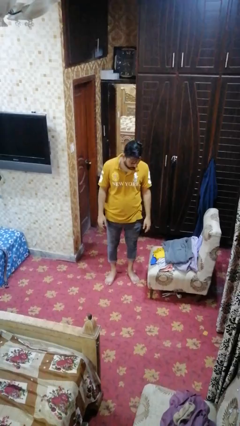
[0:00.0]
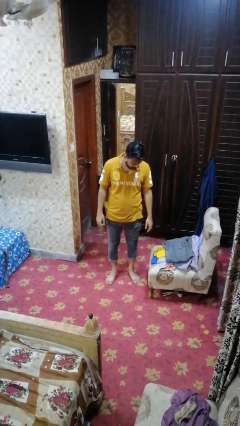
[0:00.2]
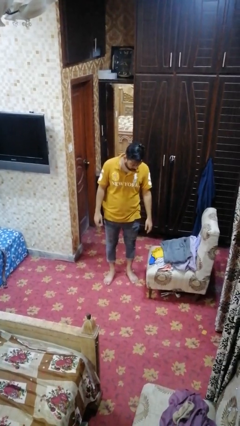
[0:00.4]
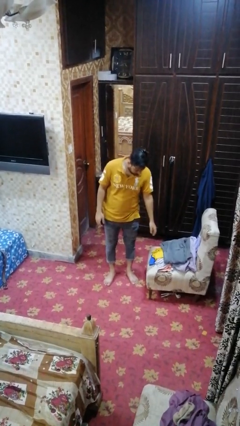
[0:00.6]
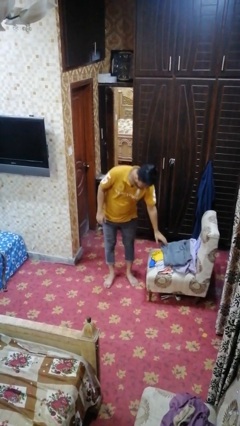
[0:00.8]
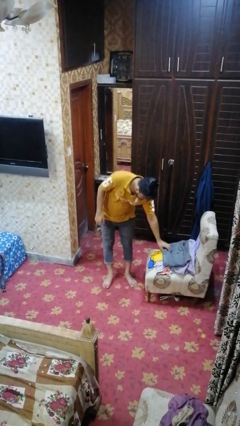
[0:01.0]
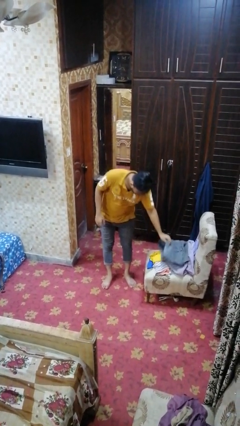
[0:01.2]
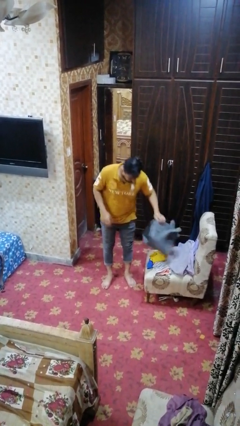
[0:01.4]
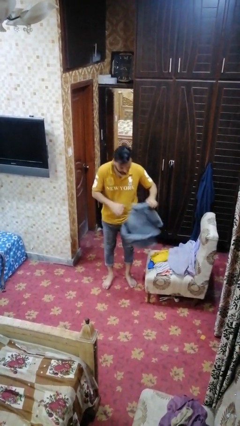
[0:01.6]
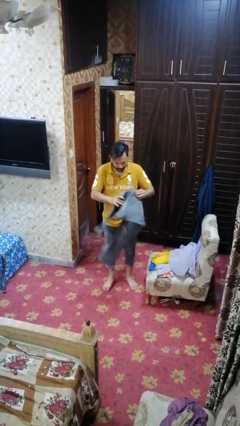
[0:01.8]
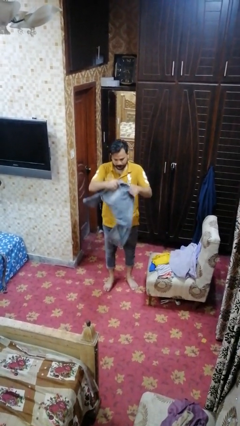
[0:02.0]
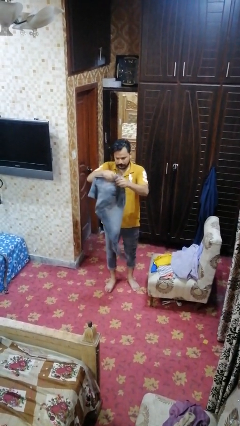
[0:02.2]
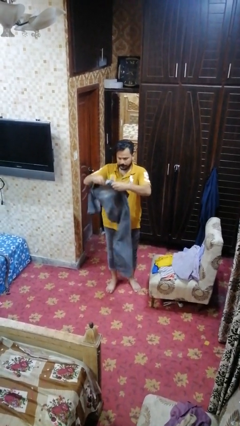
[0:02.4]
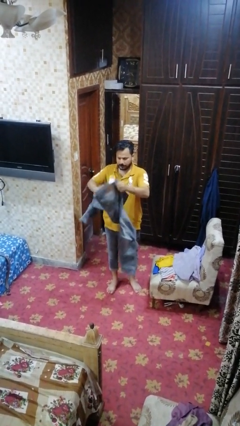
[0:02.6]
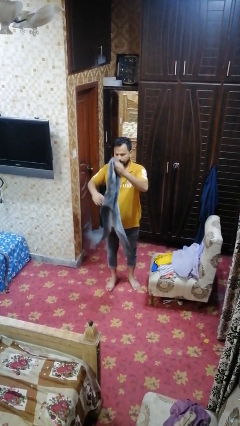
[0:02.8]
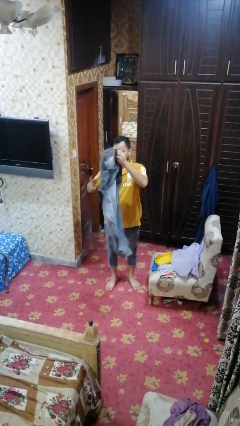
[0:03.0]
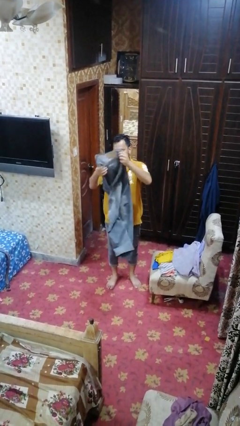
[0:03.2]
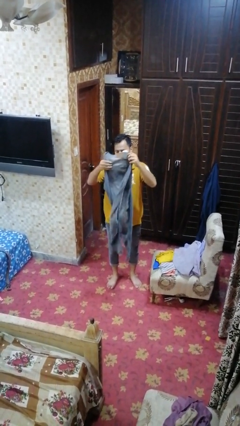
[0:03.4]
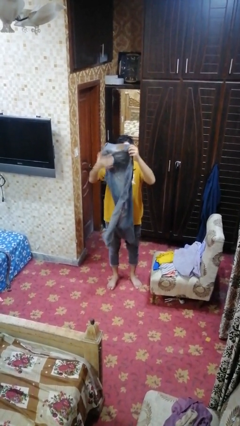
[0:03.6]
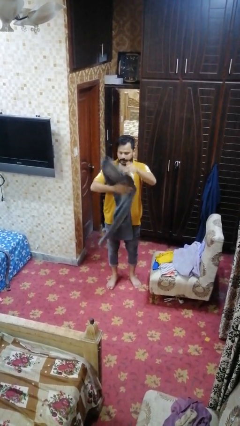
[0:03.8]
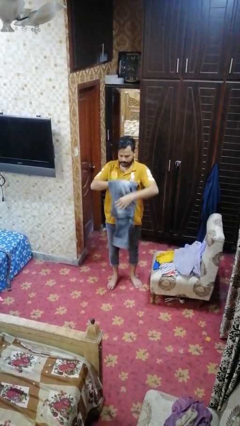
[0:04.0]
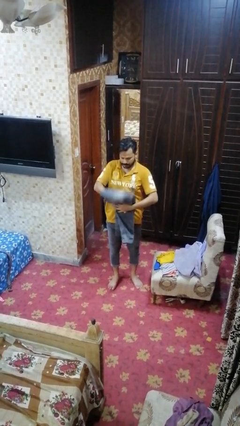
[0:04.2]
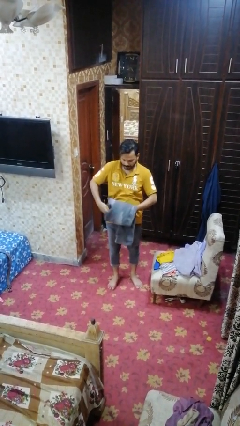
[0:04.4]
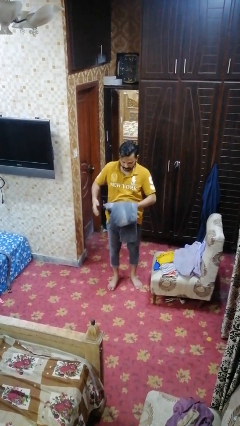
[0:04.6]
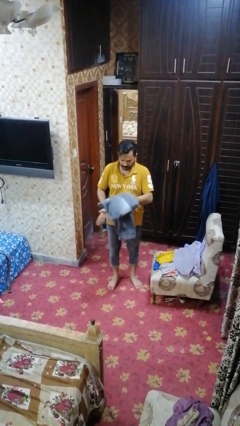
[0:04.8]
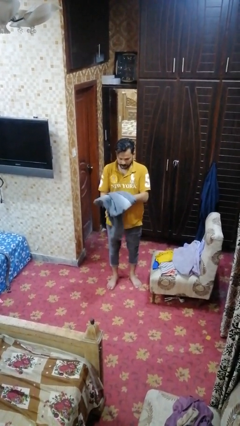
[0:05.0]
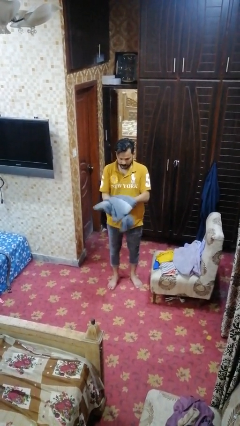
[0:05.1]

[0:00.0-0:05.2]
person folds pants

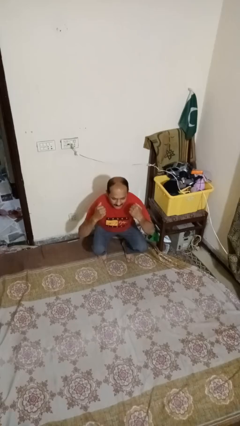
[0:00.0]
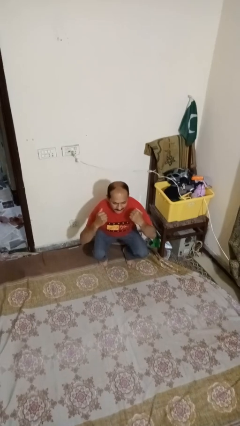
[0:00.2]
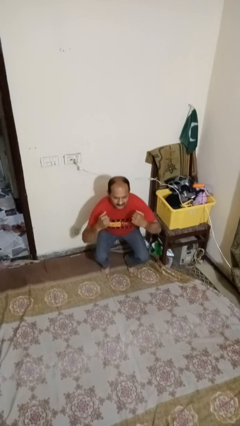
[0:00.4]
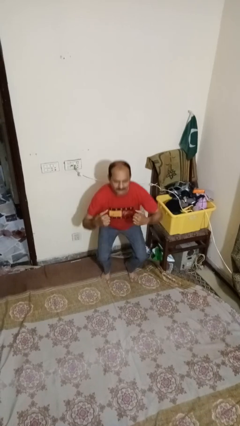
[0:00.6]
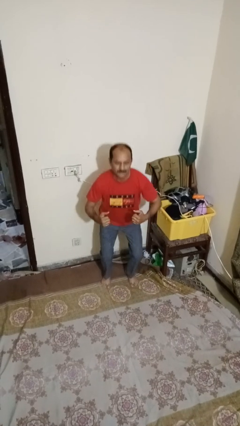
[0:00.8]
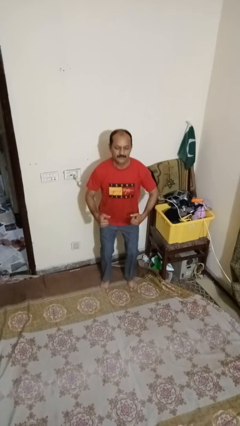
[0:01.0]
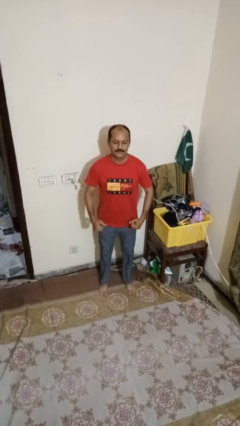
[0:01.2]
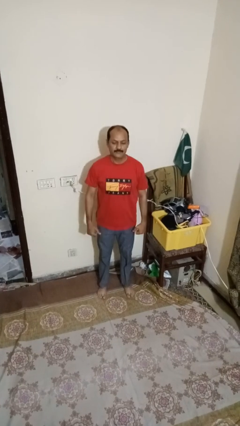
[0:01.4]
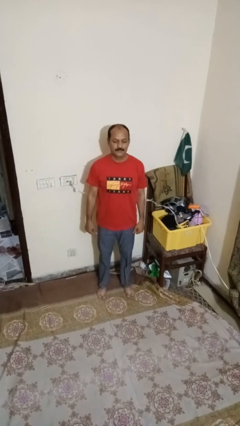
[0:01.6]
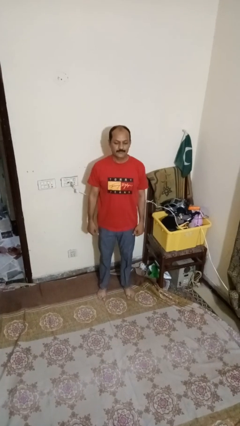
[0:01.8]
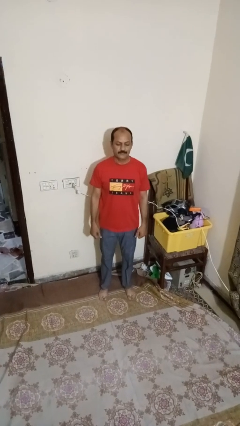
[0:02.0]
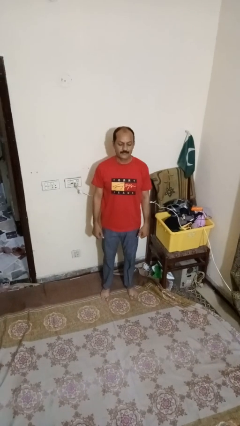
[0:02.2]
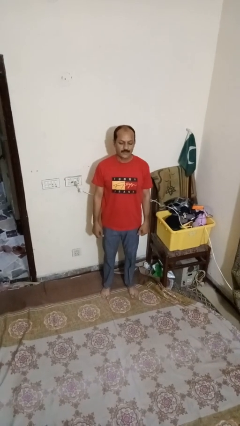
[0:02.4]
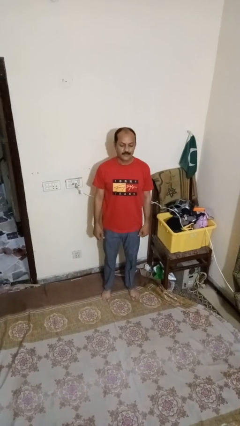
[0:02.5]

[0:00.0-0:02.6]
person stands up

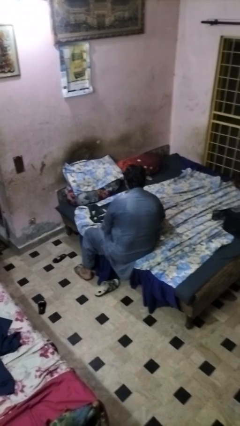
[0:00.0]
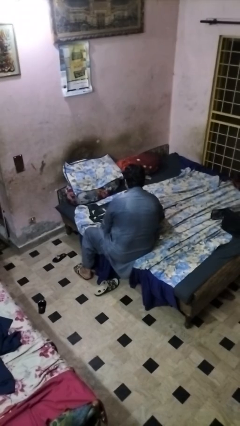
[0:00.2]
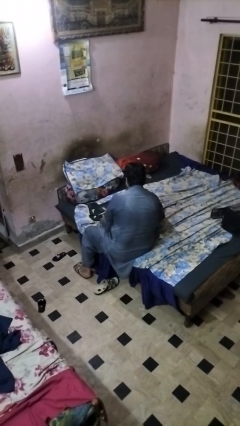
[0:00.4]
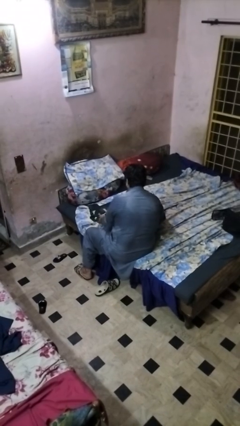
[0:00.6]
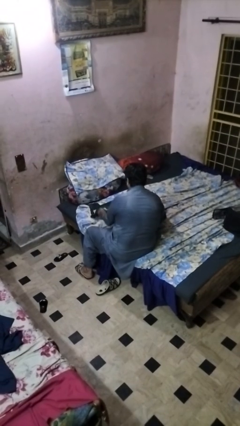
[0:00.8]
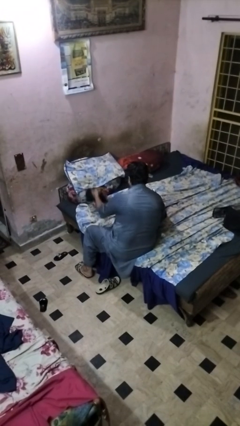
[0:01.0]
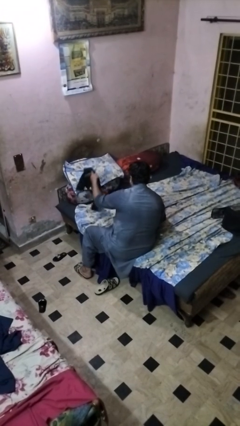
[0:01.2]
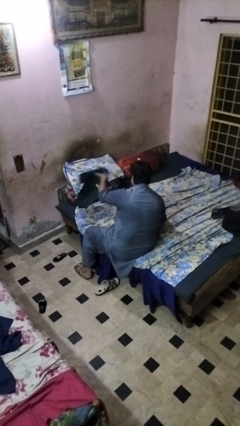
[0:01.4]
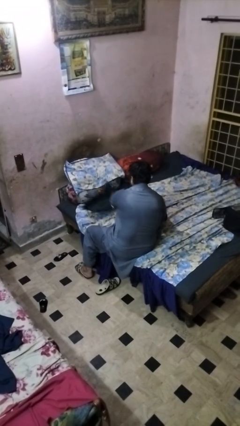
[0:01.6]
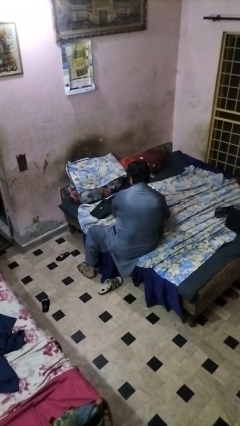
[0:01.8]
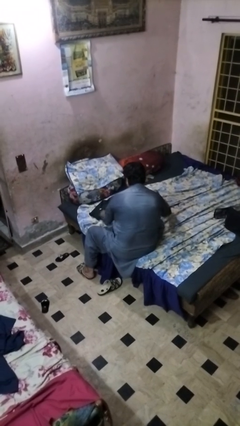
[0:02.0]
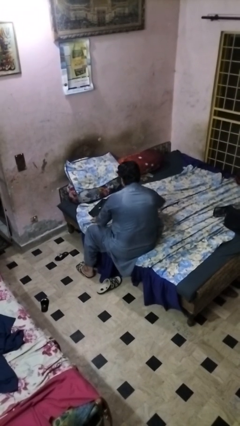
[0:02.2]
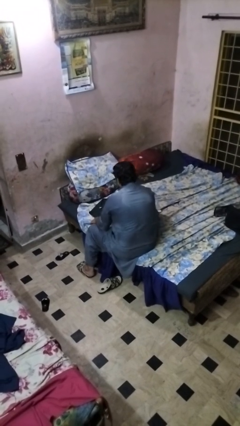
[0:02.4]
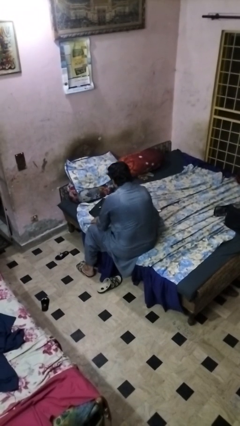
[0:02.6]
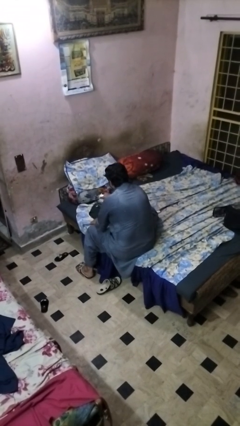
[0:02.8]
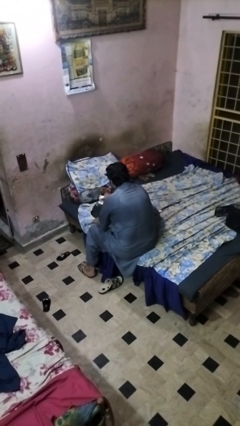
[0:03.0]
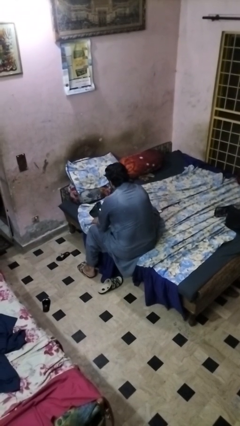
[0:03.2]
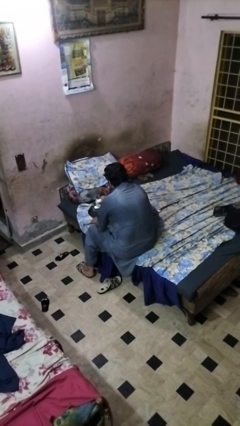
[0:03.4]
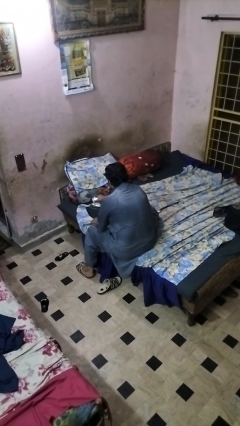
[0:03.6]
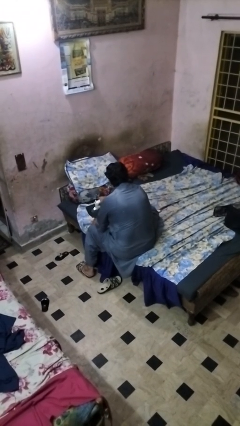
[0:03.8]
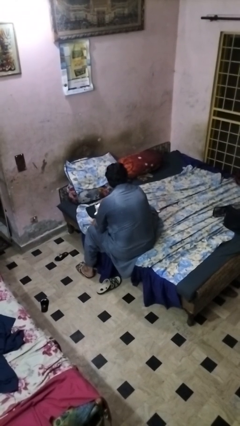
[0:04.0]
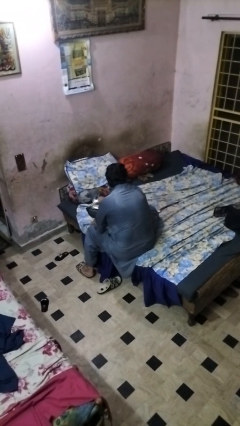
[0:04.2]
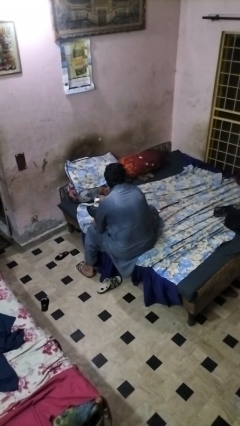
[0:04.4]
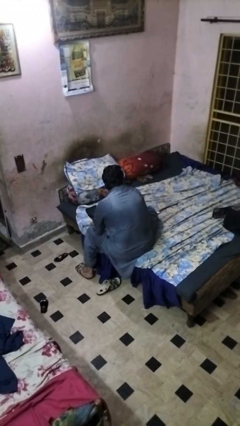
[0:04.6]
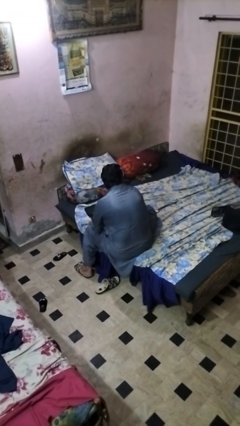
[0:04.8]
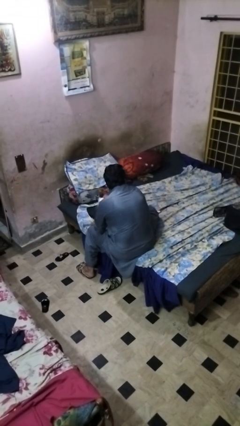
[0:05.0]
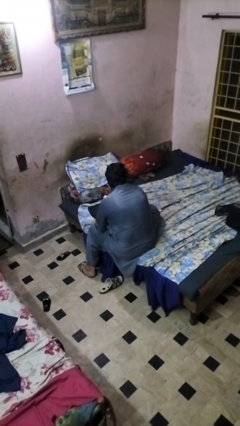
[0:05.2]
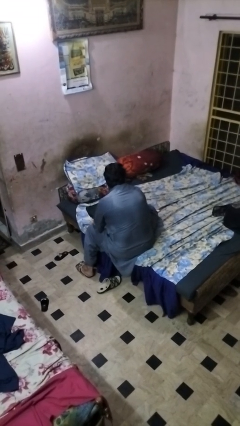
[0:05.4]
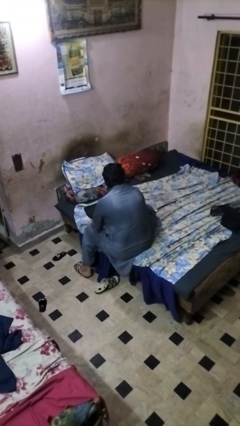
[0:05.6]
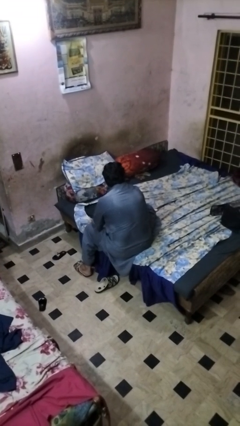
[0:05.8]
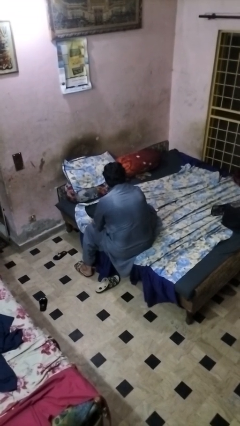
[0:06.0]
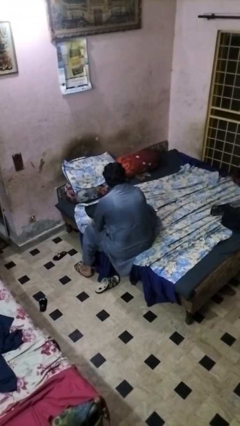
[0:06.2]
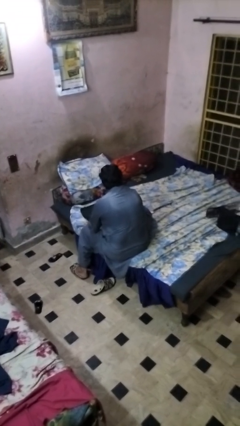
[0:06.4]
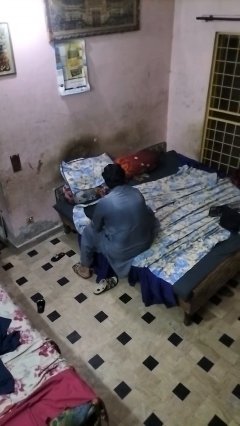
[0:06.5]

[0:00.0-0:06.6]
person irons clothes

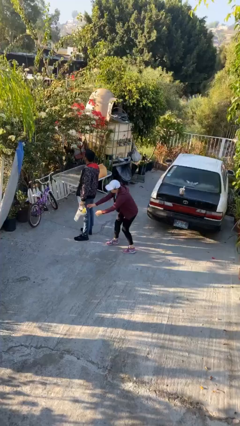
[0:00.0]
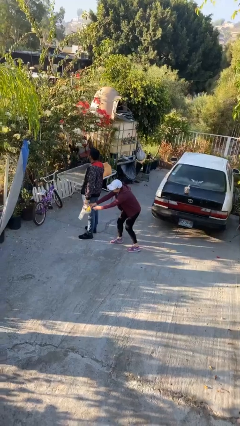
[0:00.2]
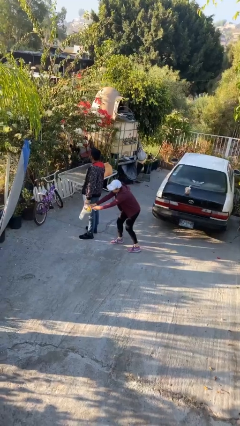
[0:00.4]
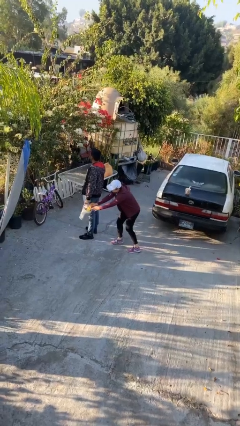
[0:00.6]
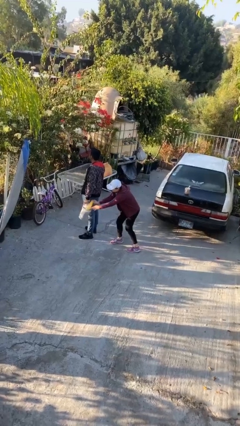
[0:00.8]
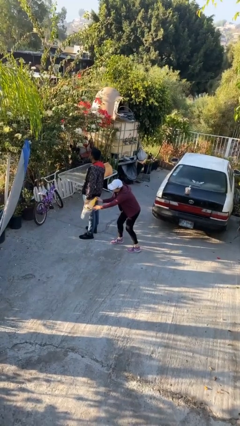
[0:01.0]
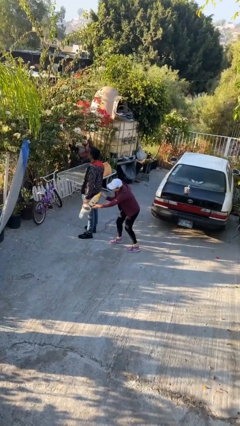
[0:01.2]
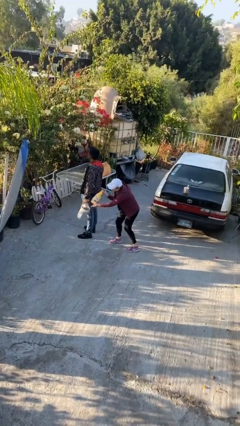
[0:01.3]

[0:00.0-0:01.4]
person steals object from person

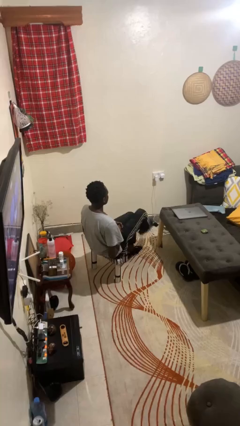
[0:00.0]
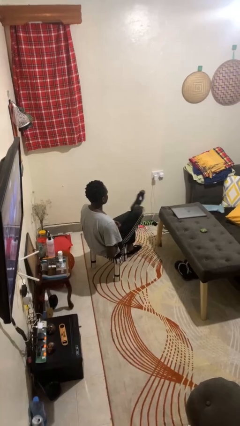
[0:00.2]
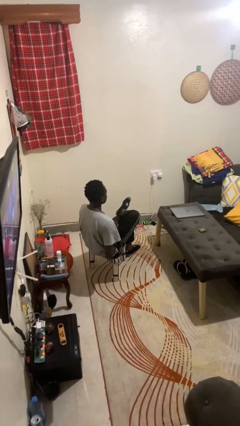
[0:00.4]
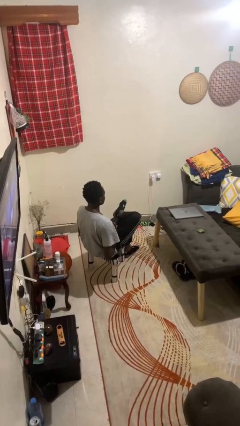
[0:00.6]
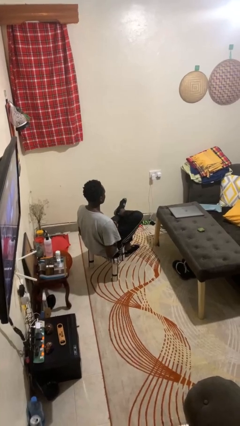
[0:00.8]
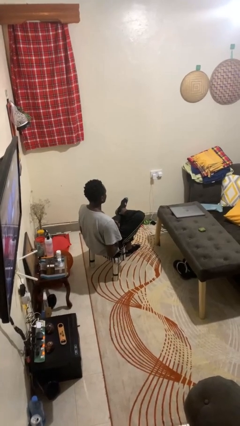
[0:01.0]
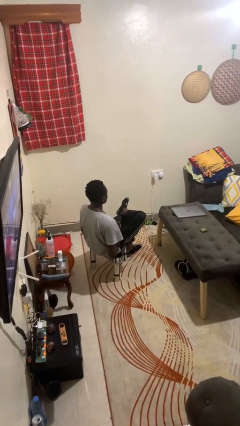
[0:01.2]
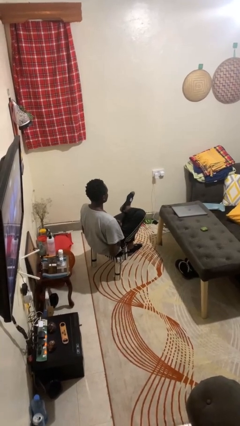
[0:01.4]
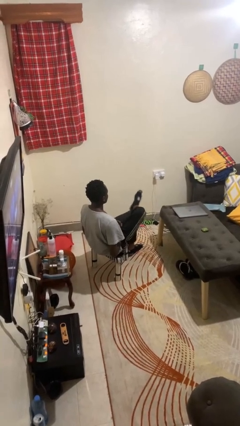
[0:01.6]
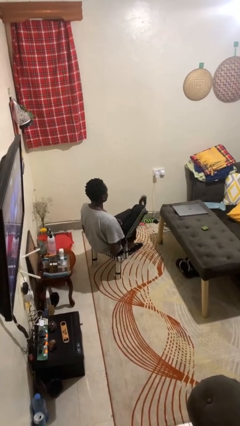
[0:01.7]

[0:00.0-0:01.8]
person crosses legs
